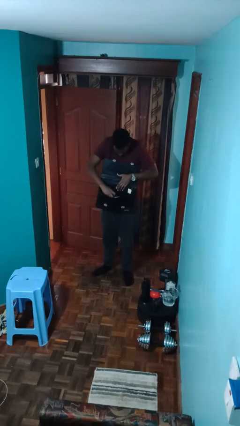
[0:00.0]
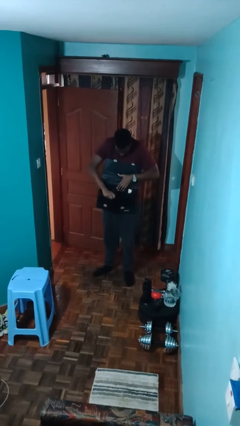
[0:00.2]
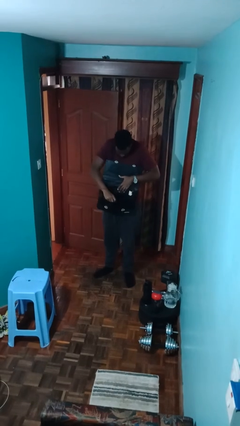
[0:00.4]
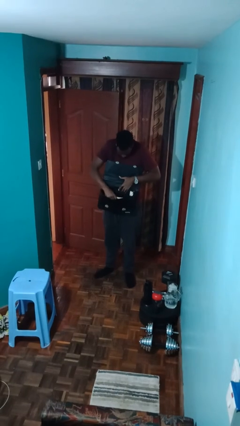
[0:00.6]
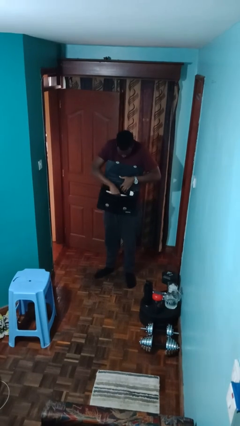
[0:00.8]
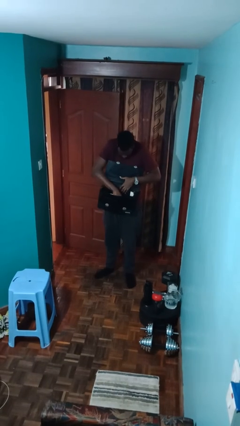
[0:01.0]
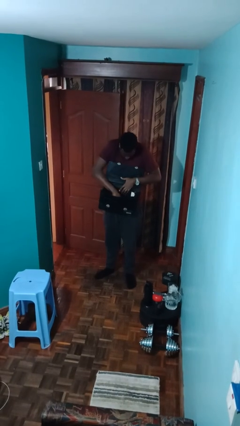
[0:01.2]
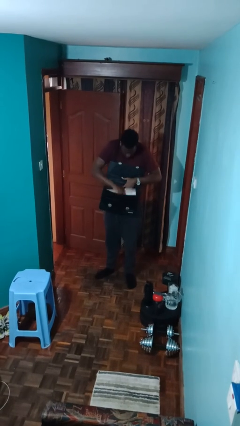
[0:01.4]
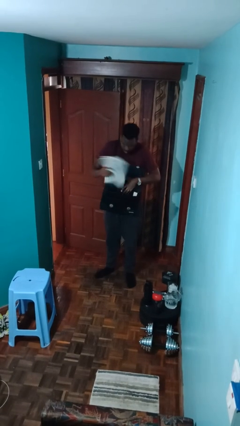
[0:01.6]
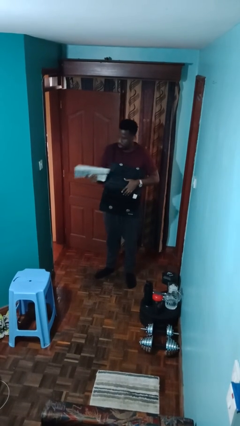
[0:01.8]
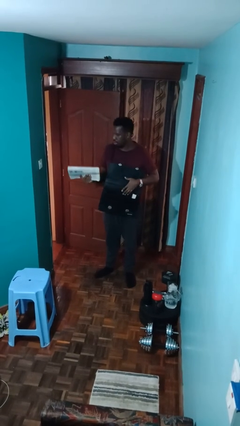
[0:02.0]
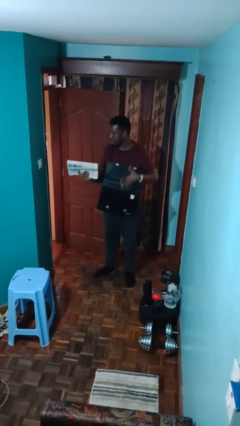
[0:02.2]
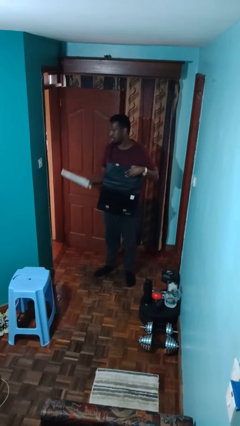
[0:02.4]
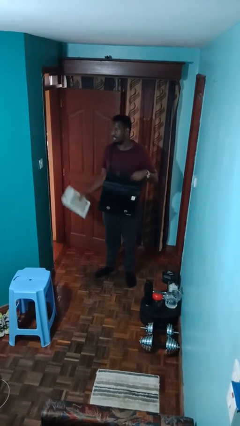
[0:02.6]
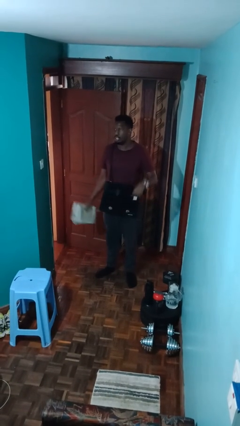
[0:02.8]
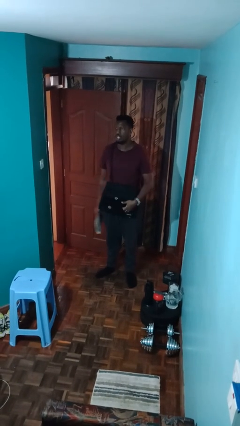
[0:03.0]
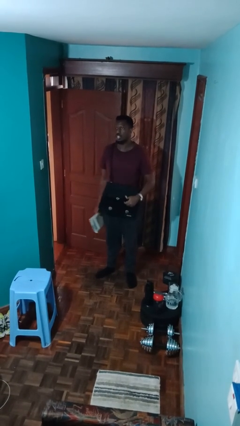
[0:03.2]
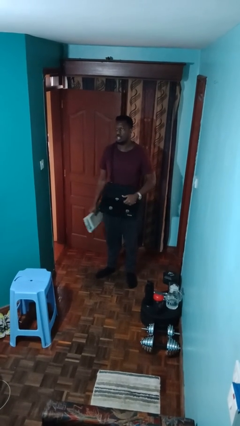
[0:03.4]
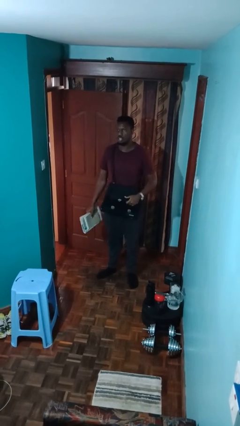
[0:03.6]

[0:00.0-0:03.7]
person takes object from purse

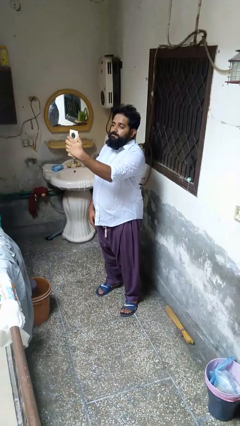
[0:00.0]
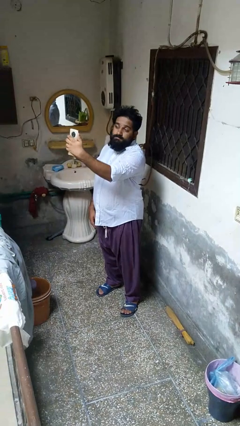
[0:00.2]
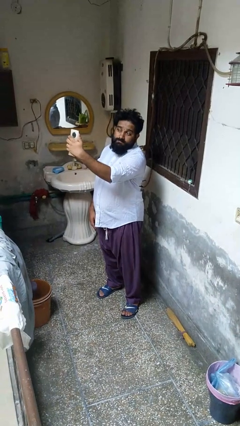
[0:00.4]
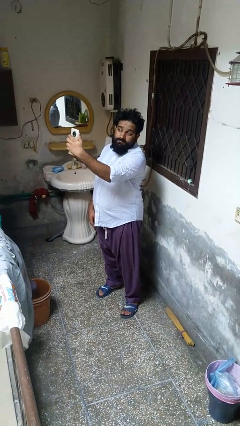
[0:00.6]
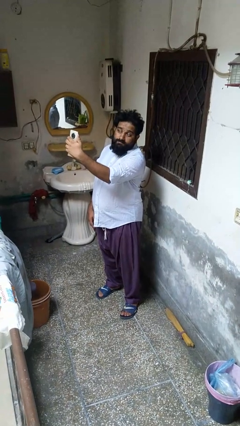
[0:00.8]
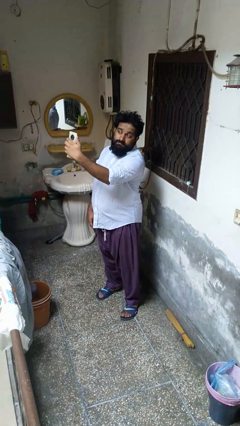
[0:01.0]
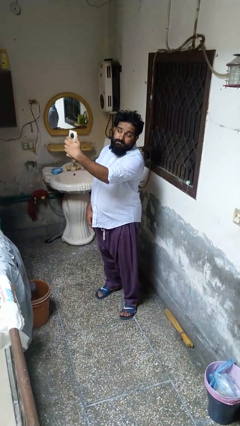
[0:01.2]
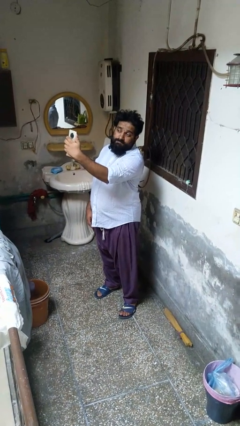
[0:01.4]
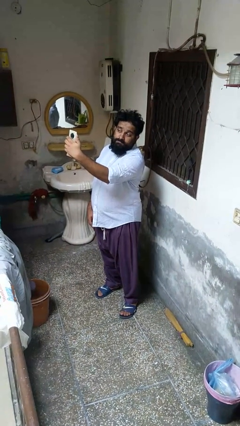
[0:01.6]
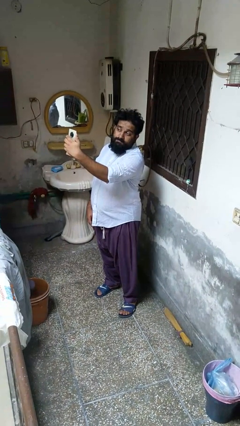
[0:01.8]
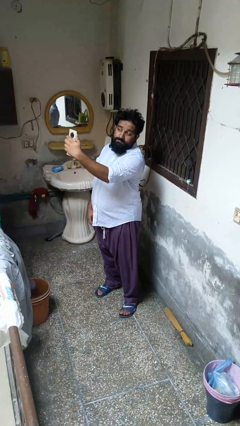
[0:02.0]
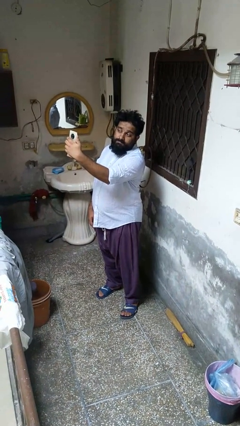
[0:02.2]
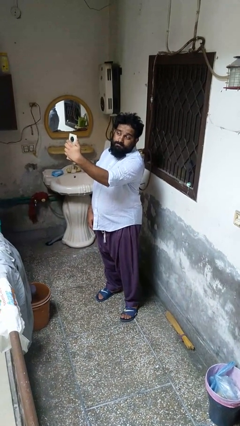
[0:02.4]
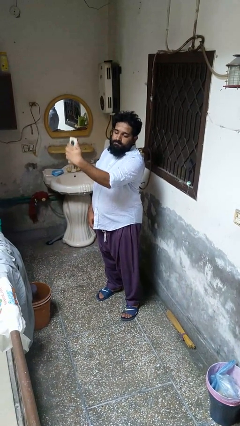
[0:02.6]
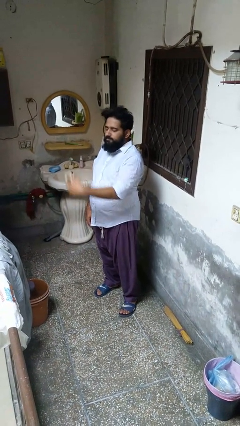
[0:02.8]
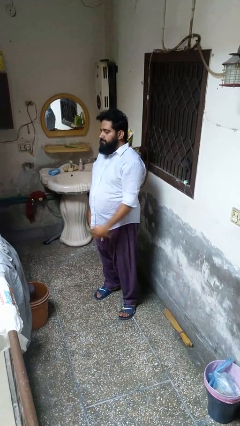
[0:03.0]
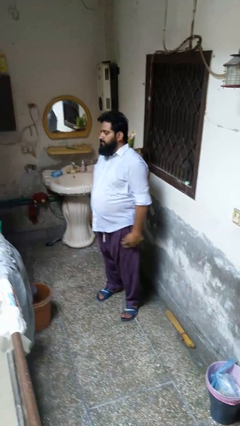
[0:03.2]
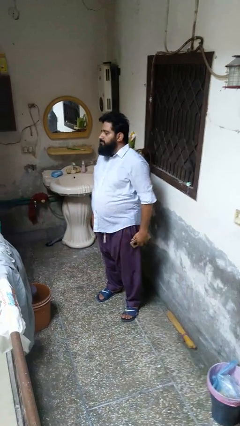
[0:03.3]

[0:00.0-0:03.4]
person takes selfie

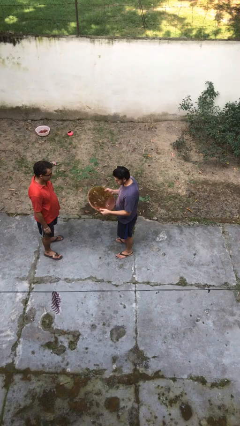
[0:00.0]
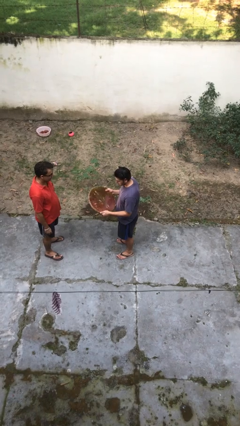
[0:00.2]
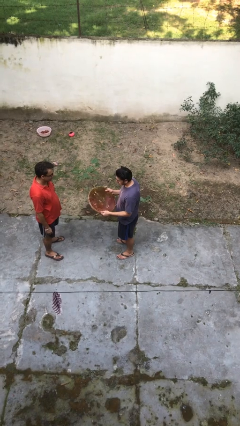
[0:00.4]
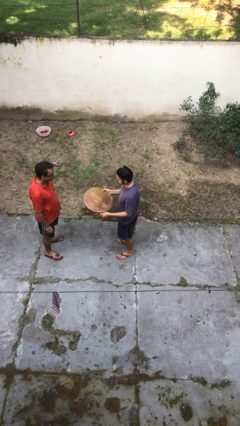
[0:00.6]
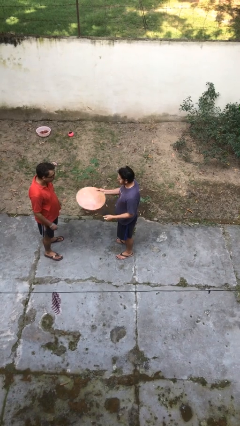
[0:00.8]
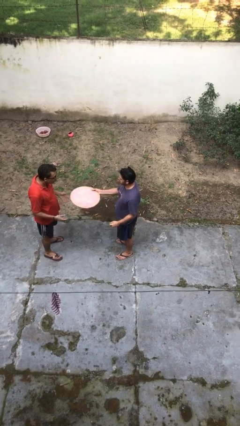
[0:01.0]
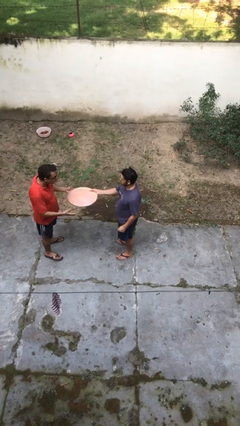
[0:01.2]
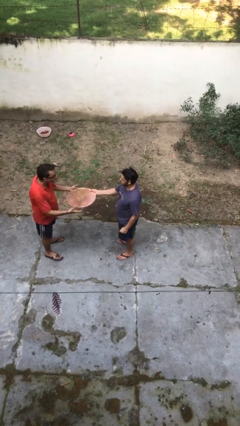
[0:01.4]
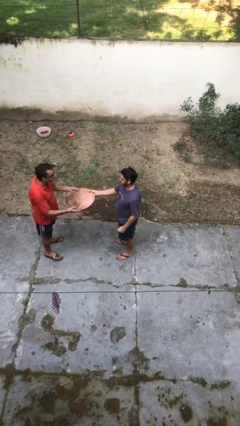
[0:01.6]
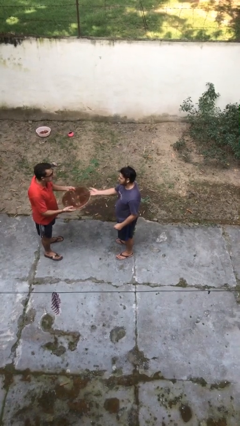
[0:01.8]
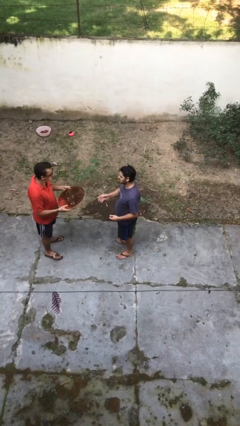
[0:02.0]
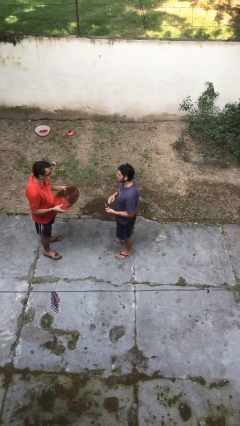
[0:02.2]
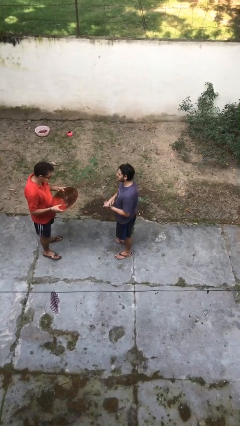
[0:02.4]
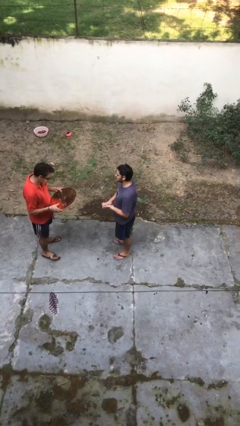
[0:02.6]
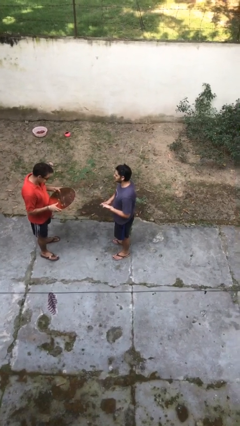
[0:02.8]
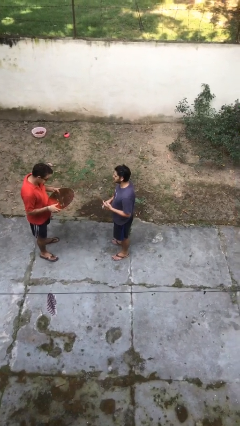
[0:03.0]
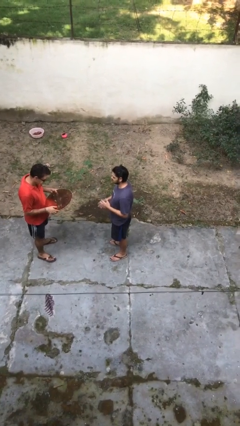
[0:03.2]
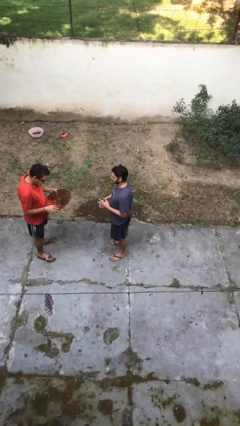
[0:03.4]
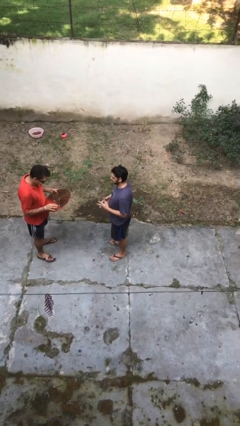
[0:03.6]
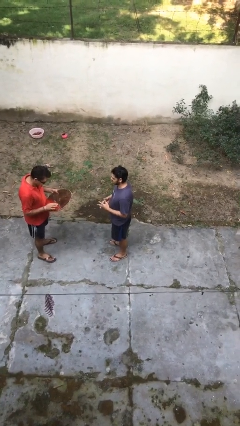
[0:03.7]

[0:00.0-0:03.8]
person transfers object to person

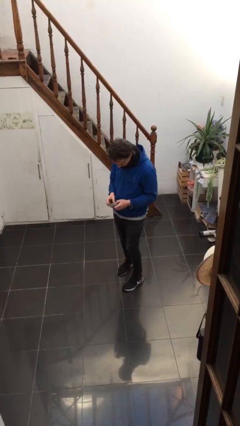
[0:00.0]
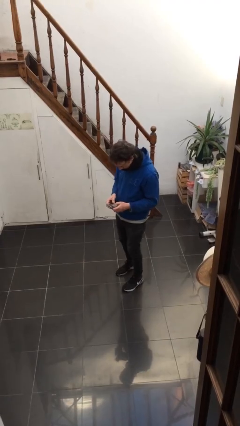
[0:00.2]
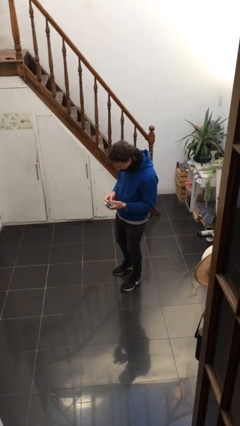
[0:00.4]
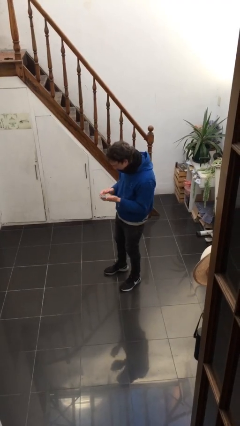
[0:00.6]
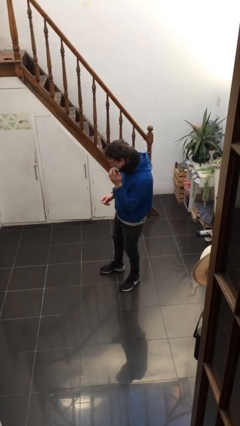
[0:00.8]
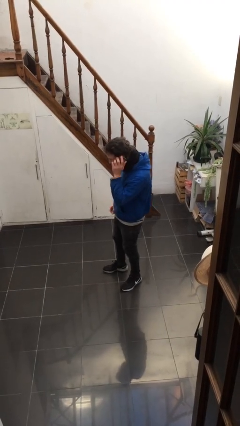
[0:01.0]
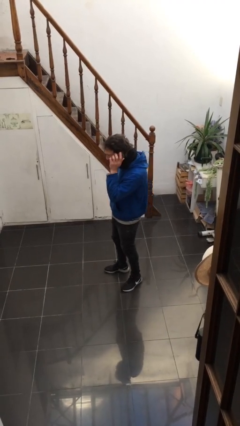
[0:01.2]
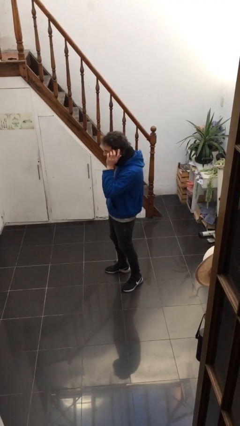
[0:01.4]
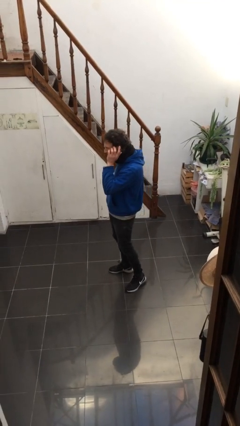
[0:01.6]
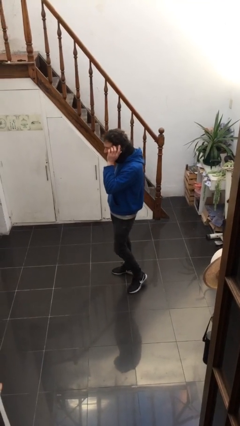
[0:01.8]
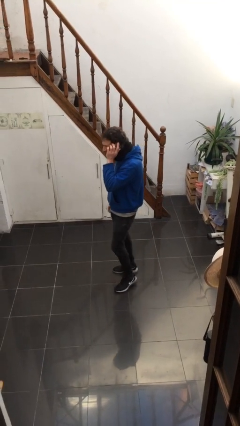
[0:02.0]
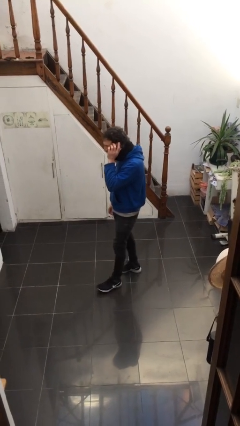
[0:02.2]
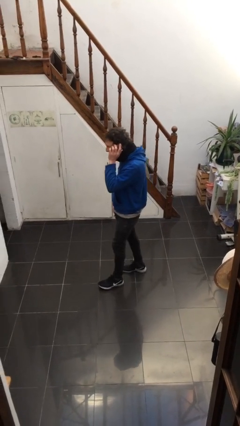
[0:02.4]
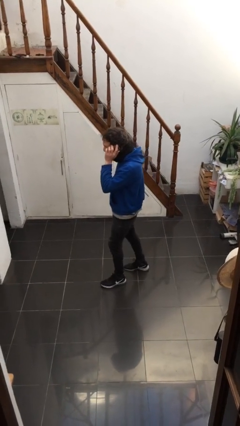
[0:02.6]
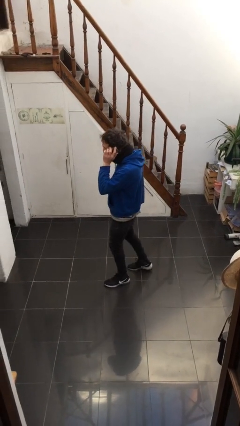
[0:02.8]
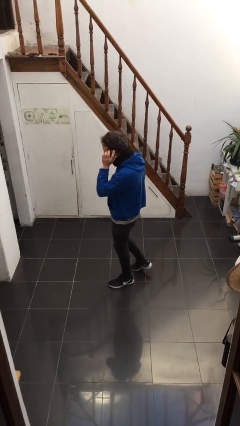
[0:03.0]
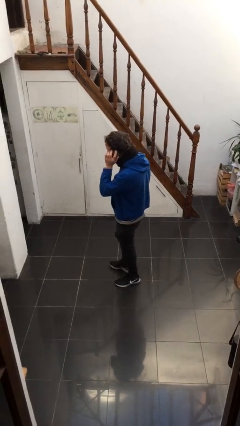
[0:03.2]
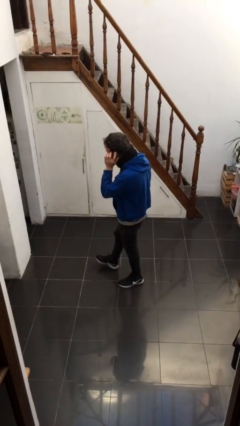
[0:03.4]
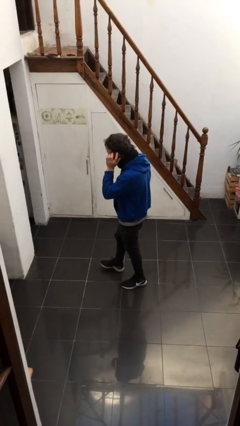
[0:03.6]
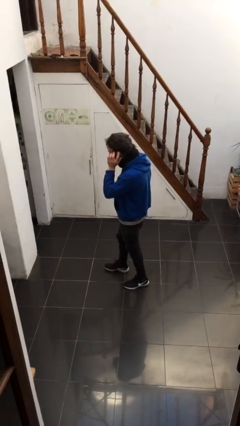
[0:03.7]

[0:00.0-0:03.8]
person talks on phone

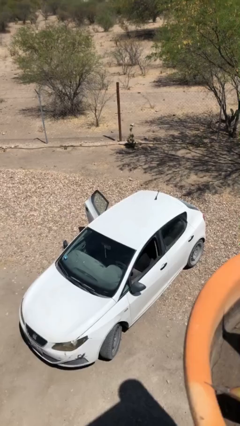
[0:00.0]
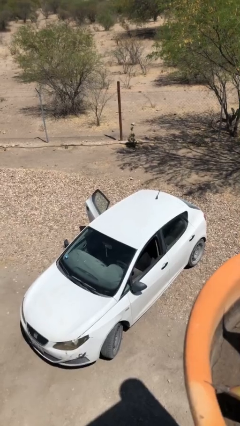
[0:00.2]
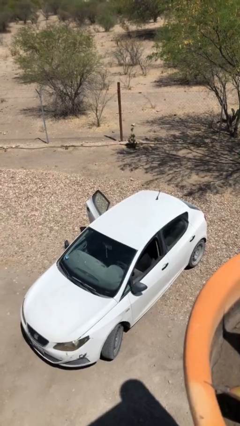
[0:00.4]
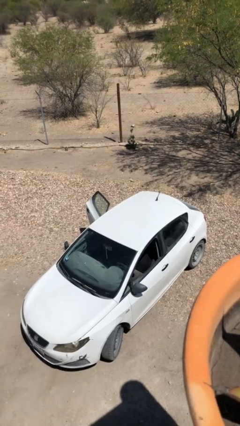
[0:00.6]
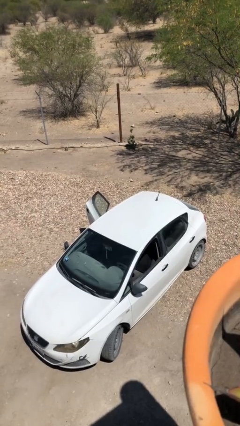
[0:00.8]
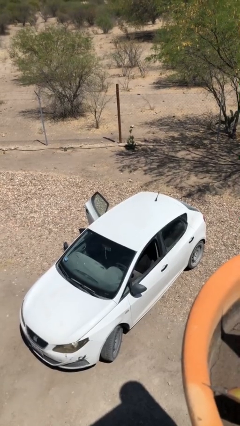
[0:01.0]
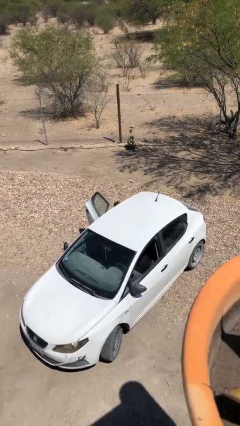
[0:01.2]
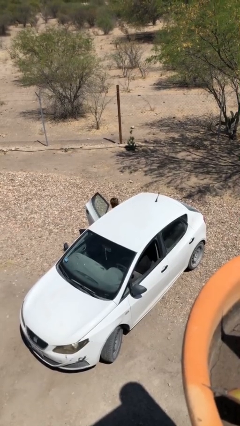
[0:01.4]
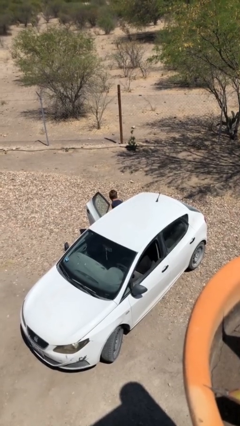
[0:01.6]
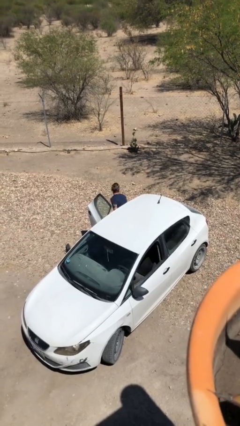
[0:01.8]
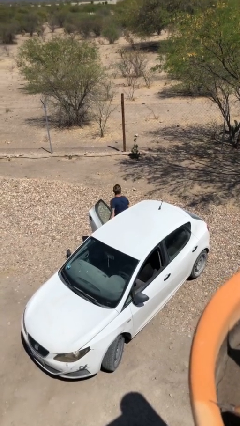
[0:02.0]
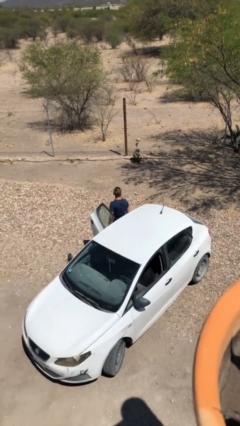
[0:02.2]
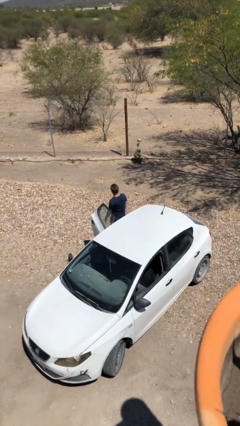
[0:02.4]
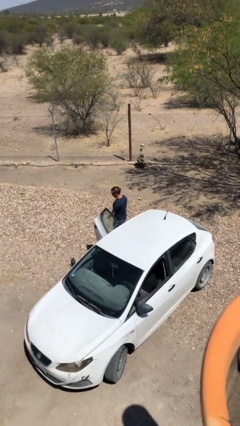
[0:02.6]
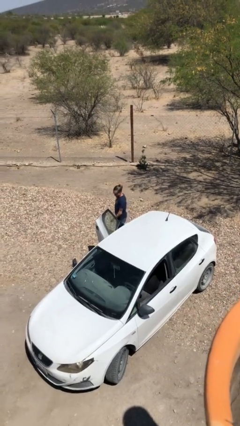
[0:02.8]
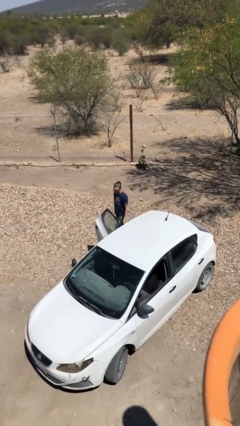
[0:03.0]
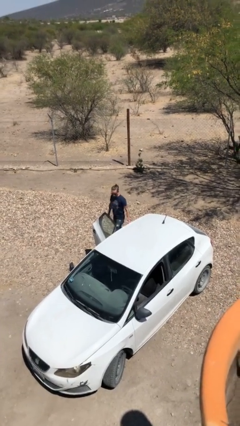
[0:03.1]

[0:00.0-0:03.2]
person exits car
